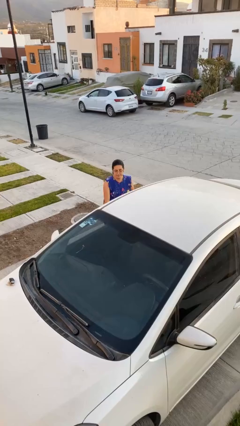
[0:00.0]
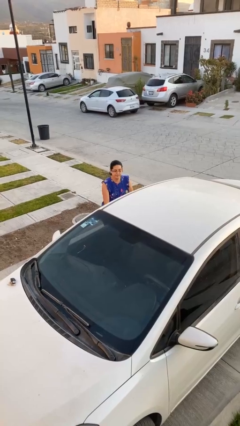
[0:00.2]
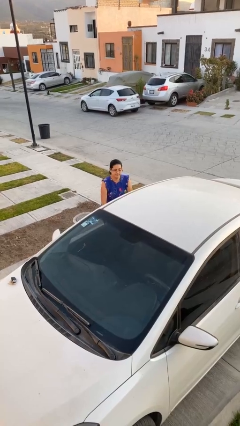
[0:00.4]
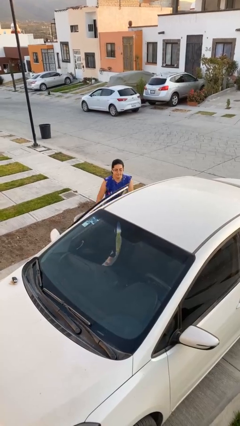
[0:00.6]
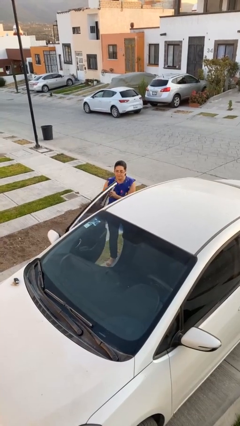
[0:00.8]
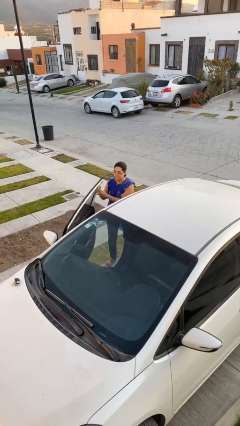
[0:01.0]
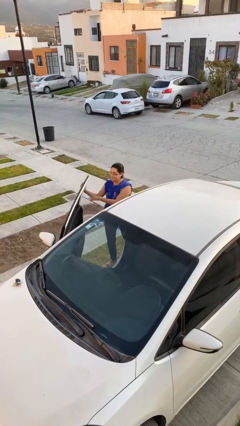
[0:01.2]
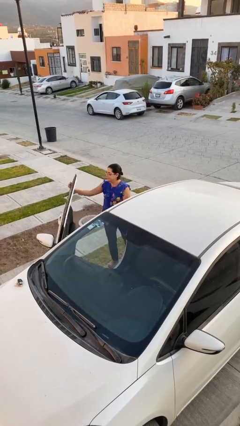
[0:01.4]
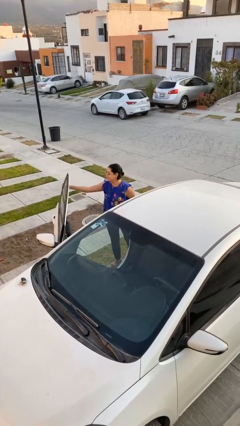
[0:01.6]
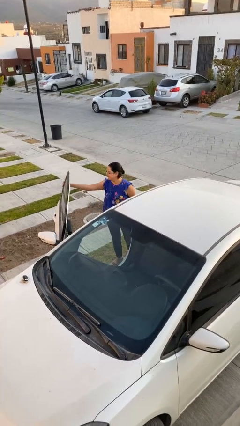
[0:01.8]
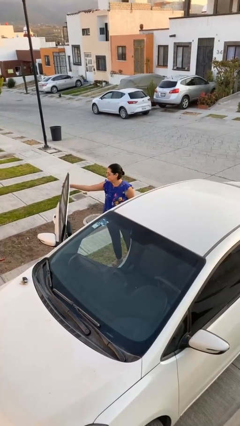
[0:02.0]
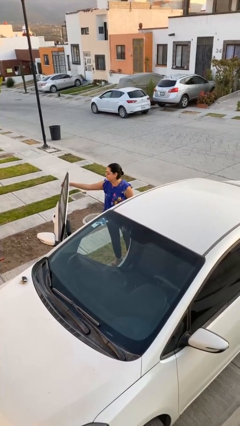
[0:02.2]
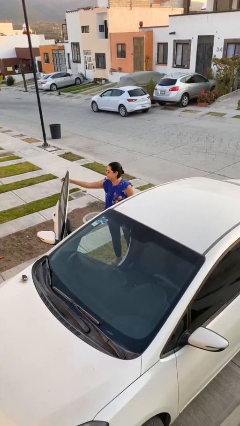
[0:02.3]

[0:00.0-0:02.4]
person opens car door

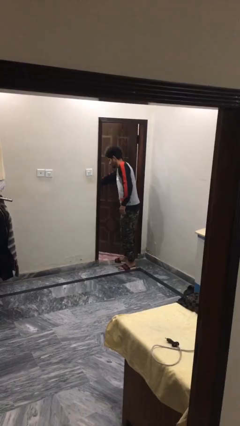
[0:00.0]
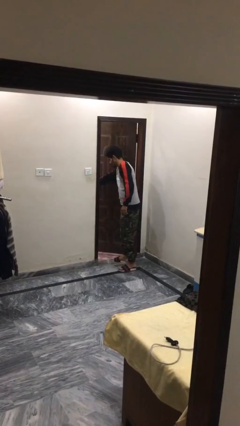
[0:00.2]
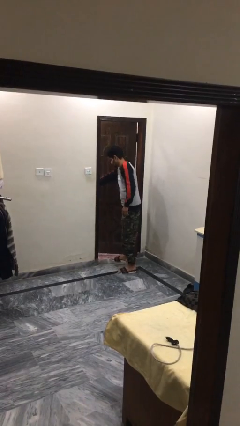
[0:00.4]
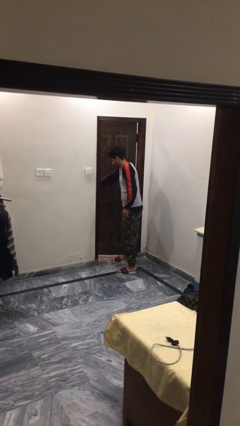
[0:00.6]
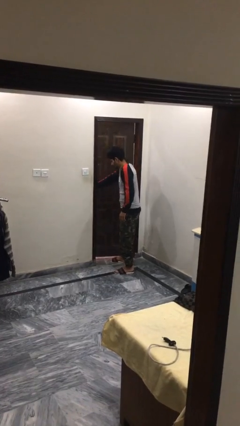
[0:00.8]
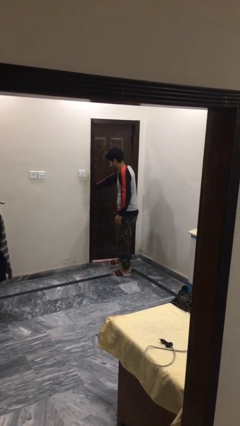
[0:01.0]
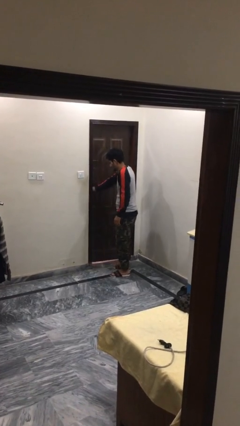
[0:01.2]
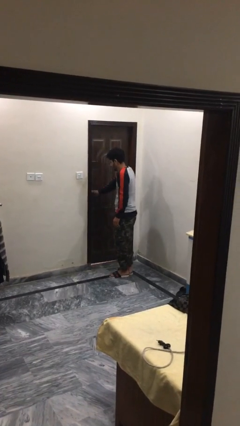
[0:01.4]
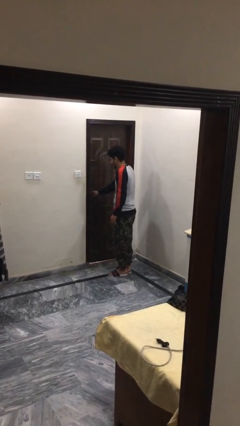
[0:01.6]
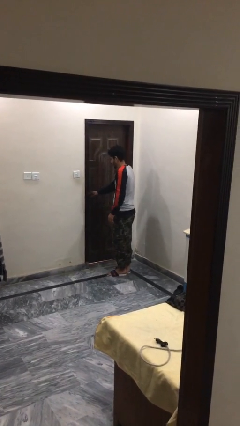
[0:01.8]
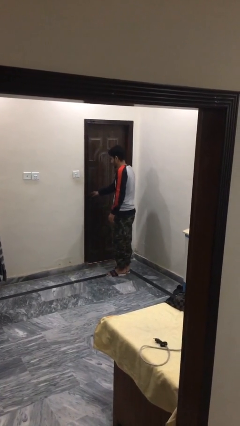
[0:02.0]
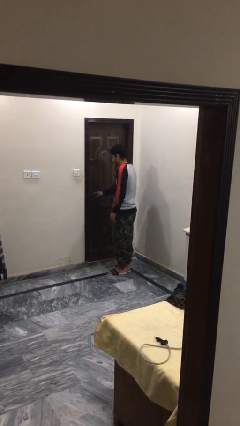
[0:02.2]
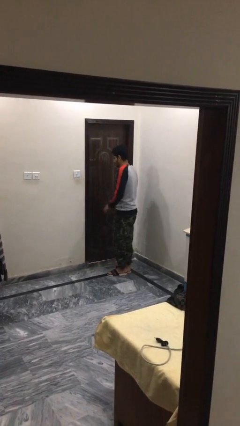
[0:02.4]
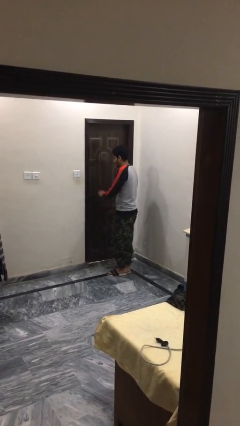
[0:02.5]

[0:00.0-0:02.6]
person closes facility door

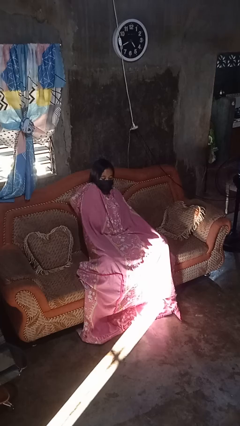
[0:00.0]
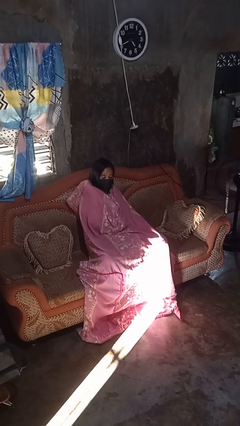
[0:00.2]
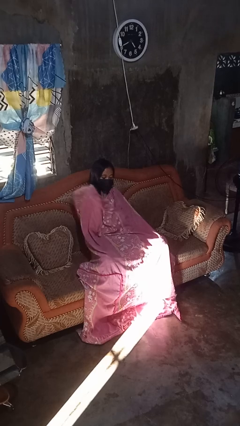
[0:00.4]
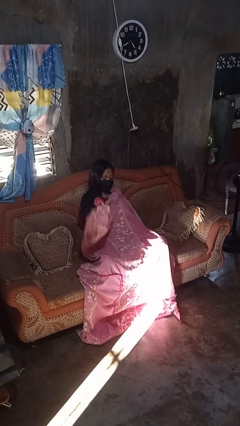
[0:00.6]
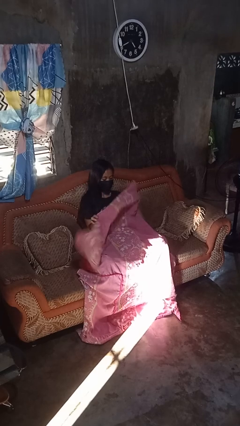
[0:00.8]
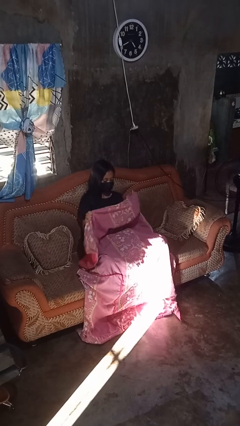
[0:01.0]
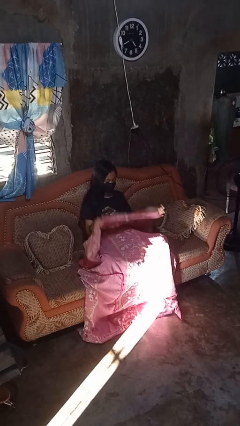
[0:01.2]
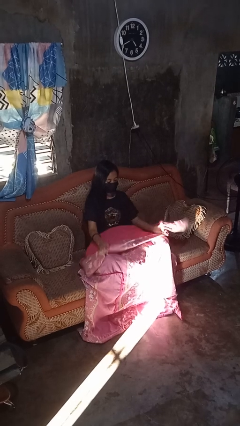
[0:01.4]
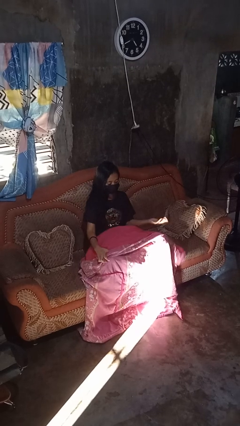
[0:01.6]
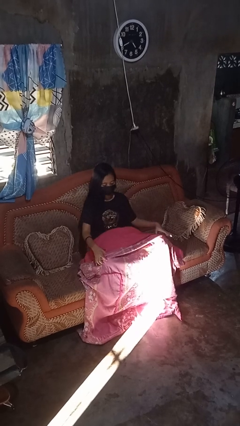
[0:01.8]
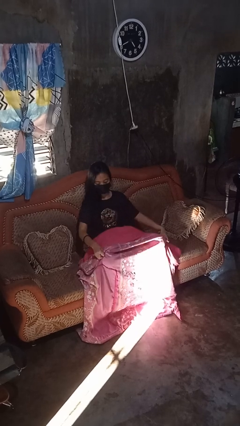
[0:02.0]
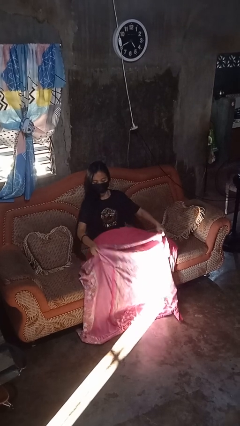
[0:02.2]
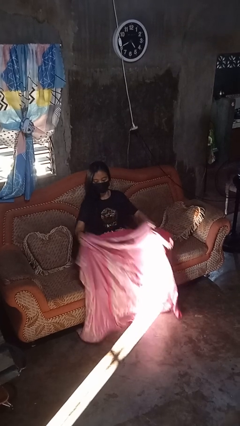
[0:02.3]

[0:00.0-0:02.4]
person uncovers with blanket

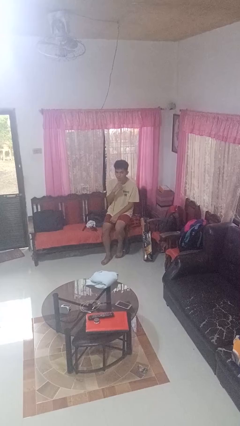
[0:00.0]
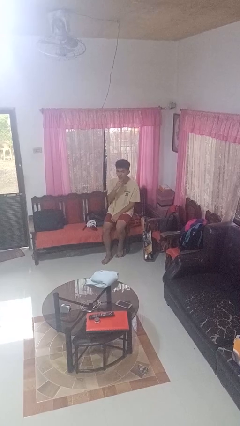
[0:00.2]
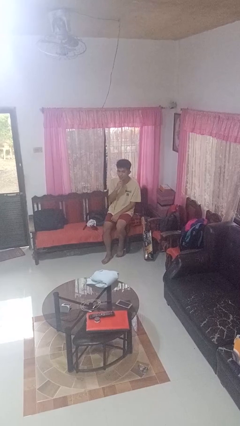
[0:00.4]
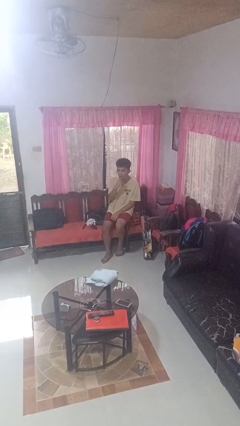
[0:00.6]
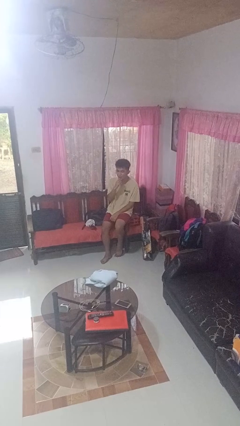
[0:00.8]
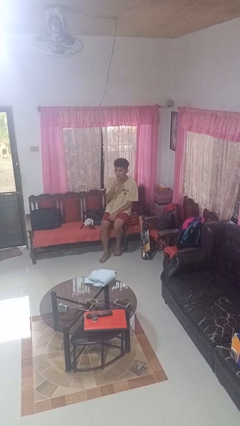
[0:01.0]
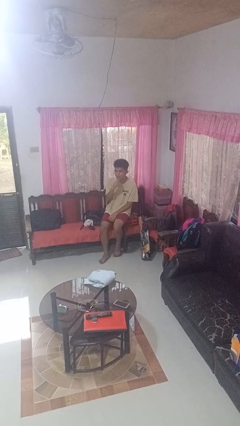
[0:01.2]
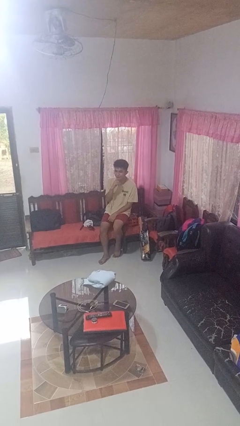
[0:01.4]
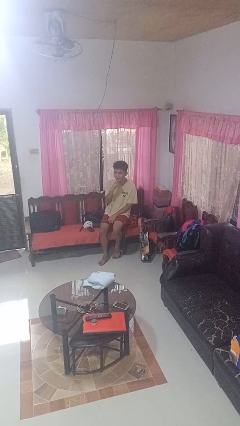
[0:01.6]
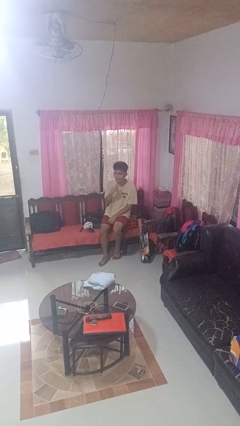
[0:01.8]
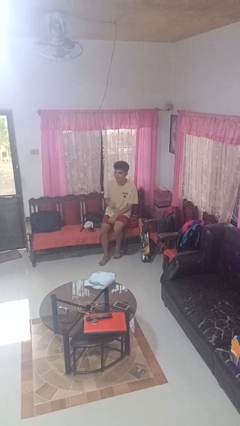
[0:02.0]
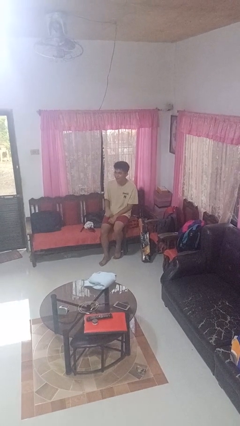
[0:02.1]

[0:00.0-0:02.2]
person strokes chin

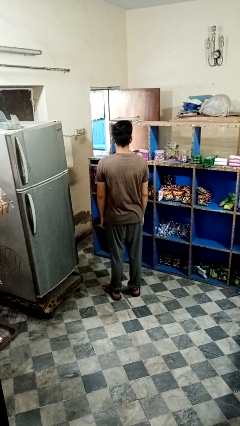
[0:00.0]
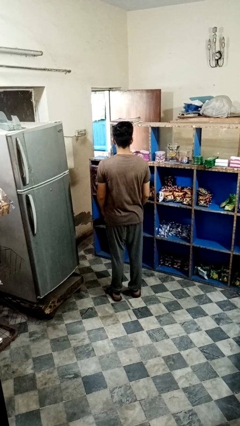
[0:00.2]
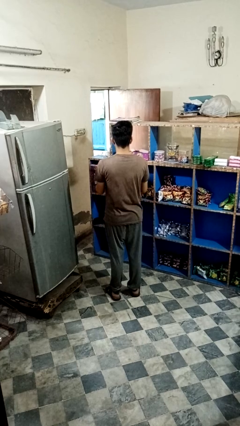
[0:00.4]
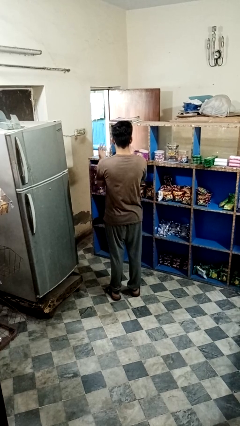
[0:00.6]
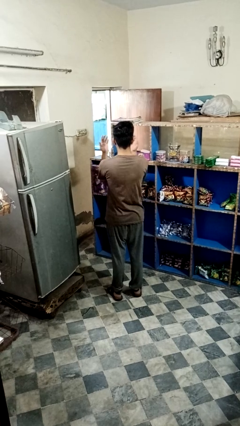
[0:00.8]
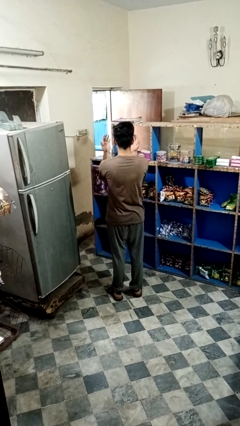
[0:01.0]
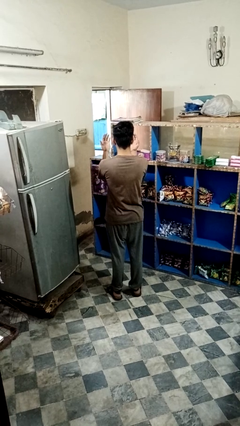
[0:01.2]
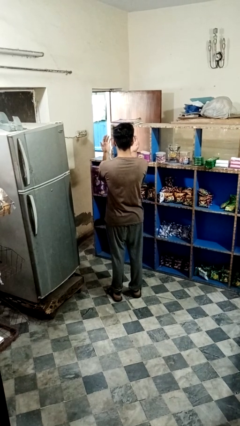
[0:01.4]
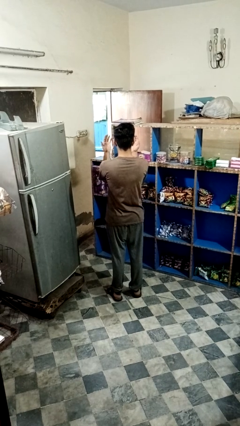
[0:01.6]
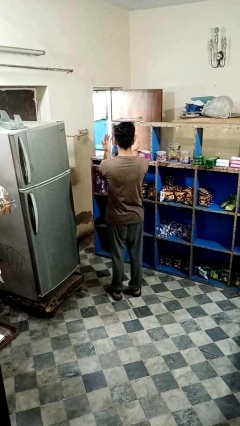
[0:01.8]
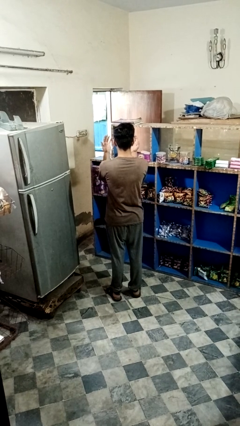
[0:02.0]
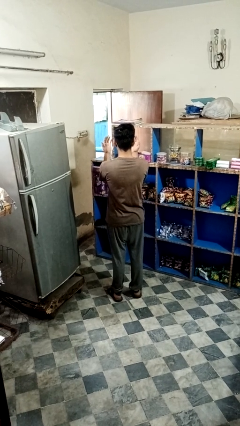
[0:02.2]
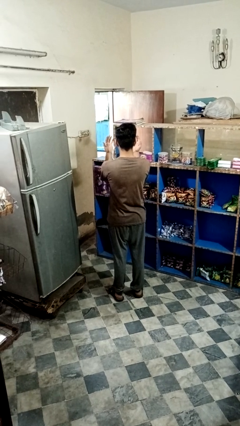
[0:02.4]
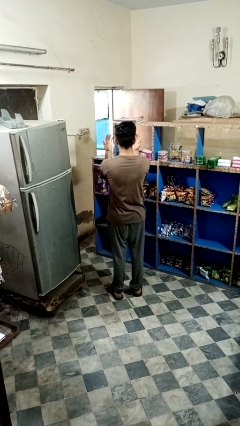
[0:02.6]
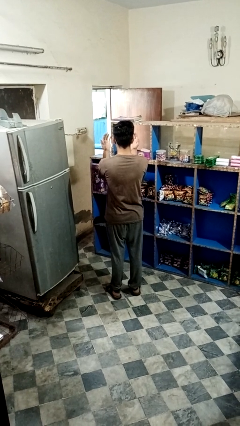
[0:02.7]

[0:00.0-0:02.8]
person prays

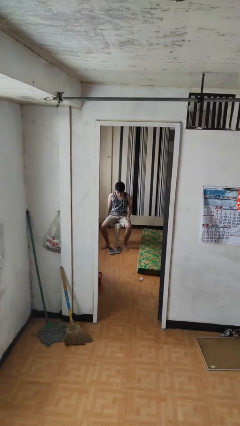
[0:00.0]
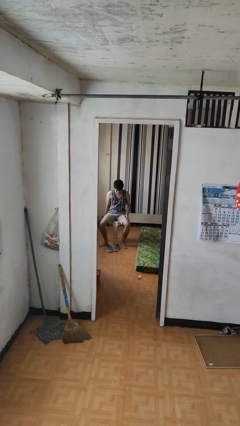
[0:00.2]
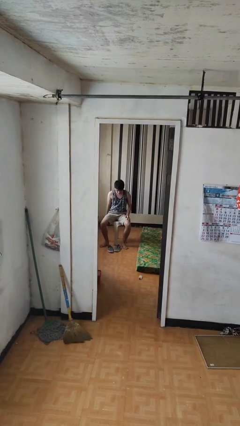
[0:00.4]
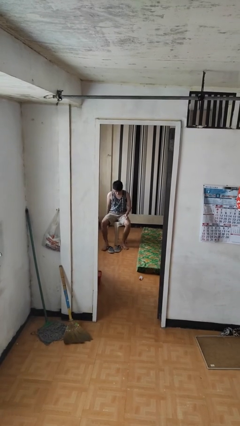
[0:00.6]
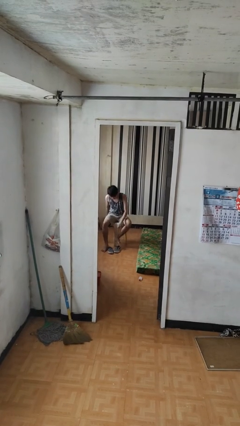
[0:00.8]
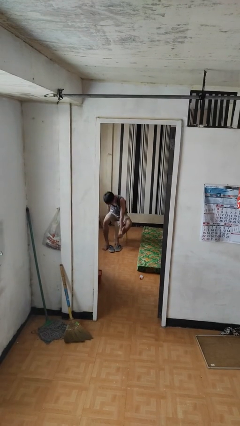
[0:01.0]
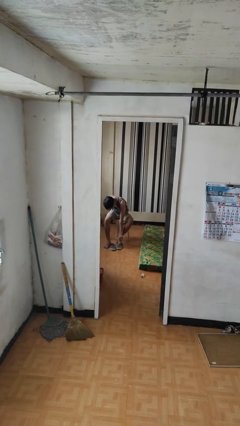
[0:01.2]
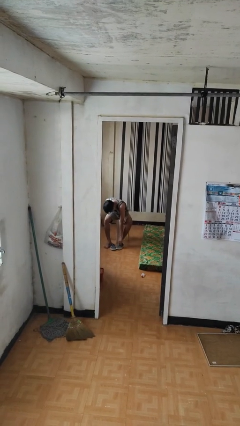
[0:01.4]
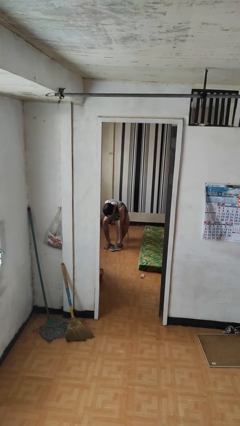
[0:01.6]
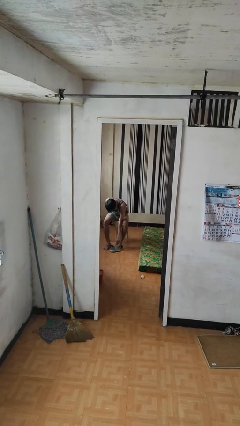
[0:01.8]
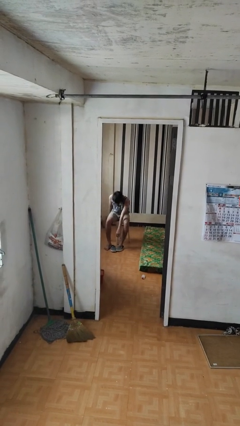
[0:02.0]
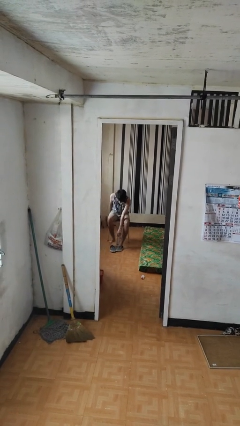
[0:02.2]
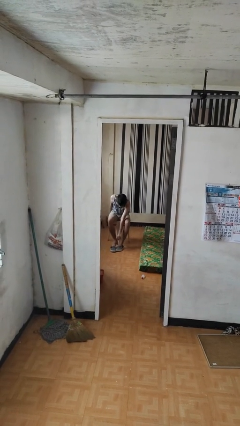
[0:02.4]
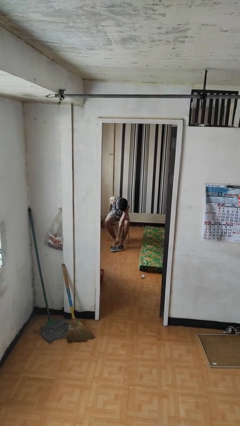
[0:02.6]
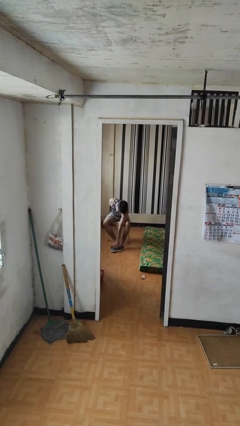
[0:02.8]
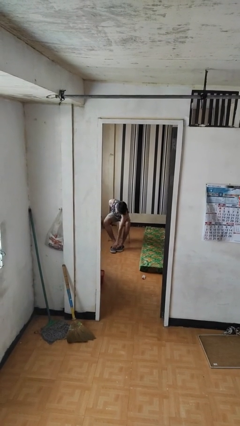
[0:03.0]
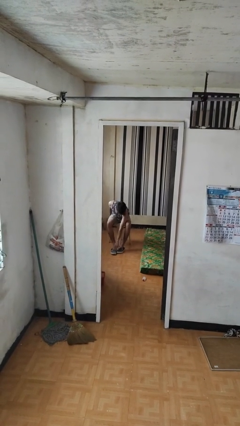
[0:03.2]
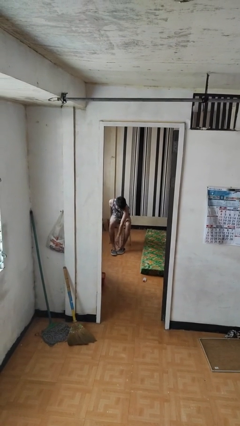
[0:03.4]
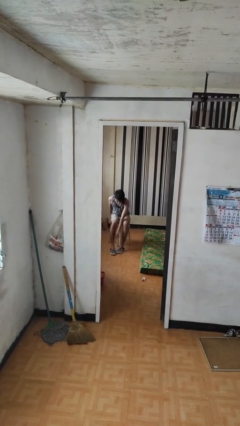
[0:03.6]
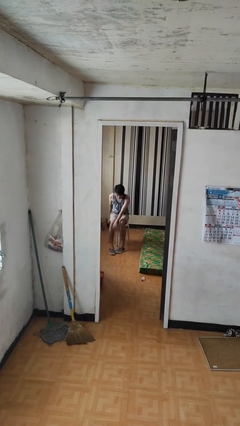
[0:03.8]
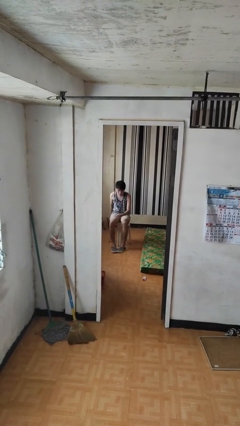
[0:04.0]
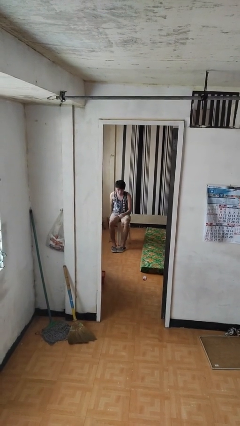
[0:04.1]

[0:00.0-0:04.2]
person puts on shoes

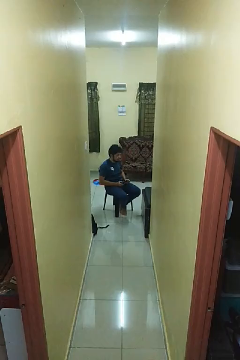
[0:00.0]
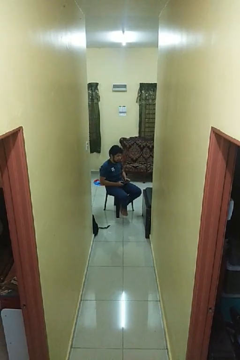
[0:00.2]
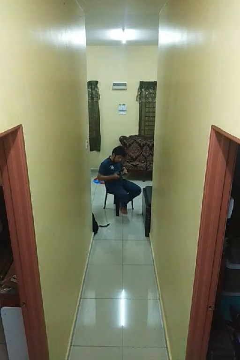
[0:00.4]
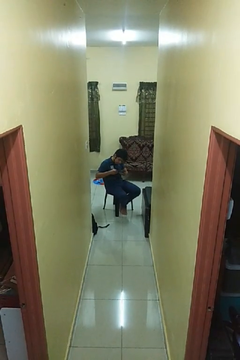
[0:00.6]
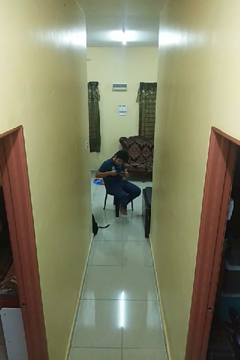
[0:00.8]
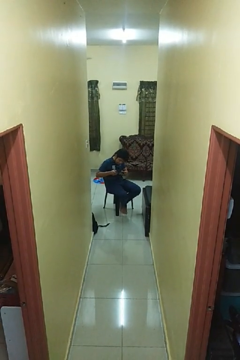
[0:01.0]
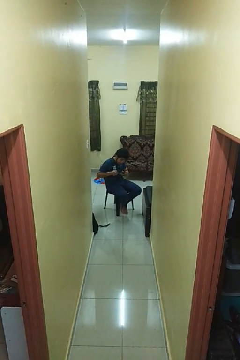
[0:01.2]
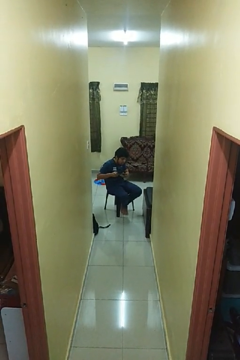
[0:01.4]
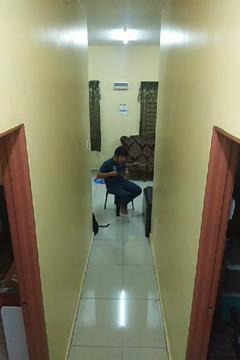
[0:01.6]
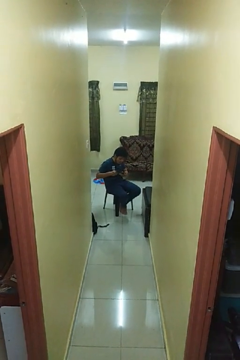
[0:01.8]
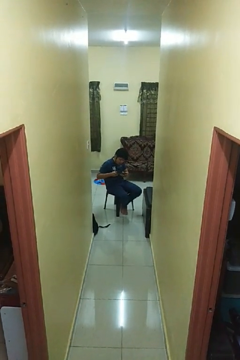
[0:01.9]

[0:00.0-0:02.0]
person interacts with handheld game
